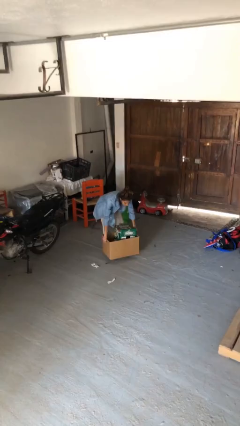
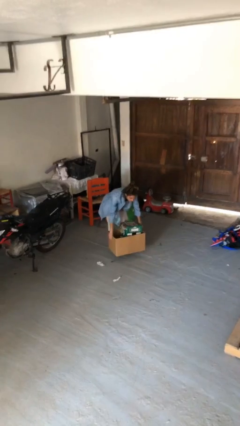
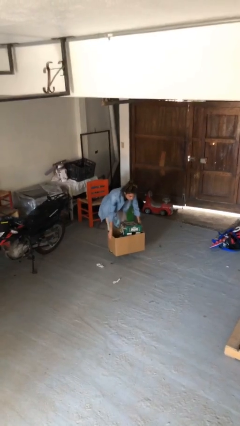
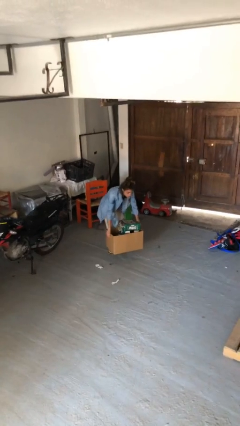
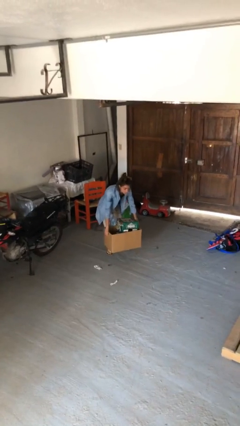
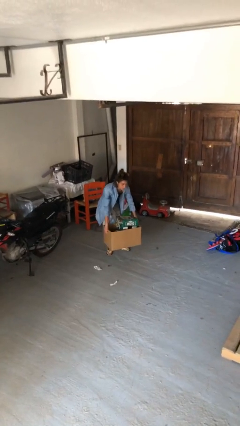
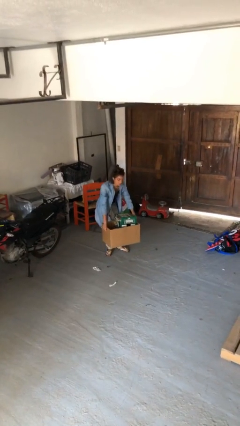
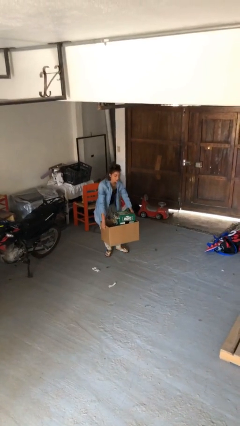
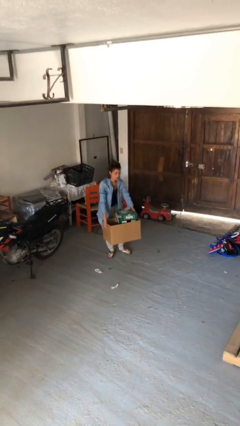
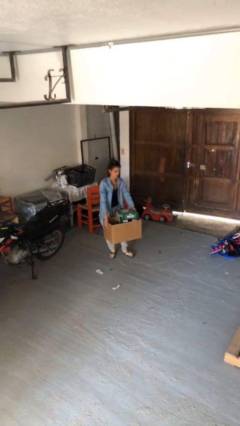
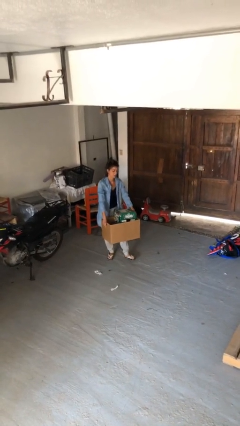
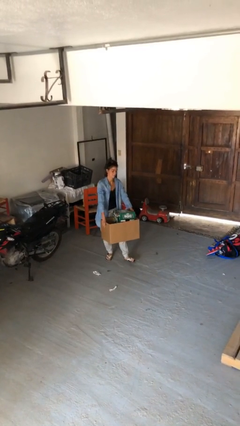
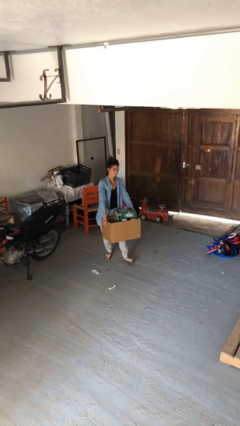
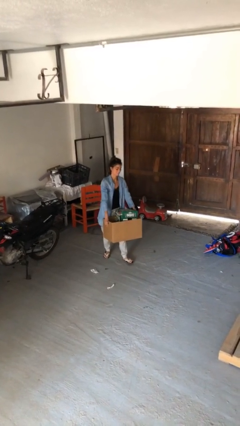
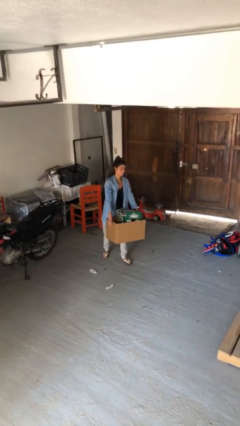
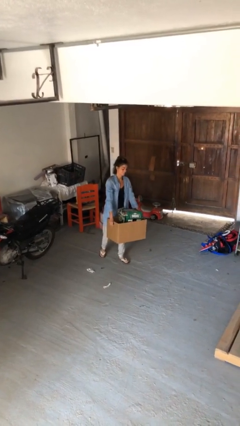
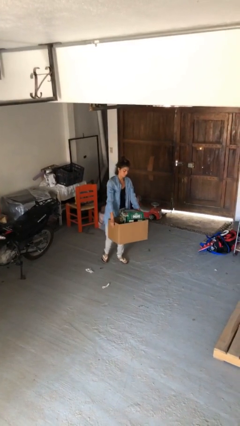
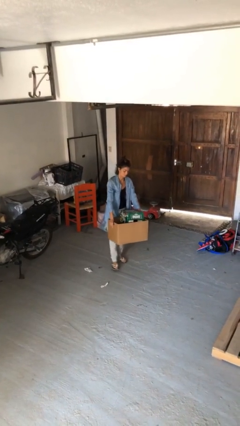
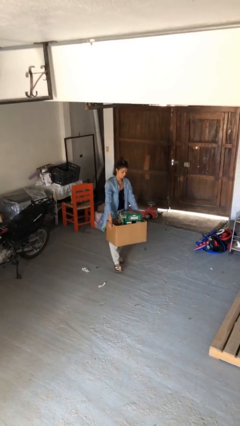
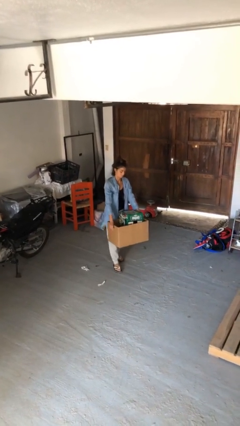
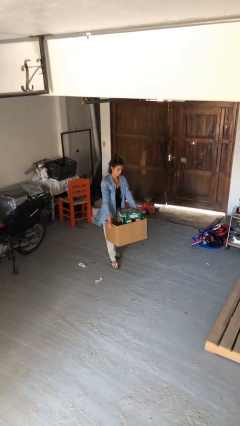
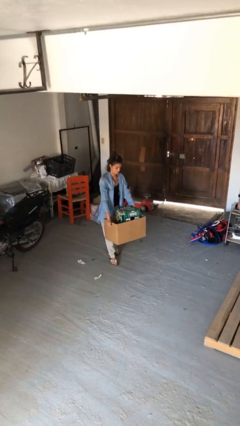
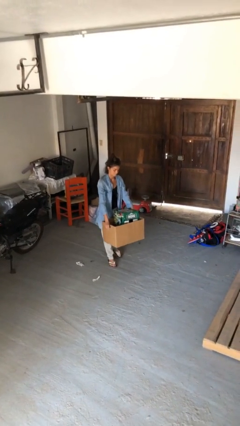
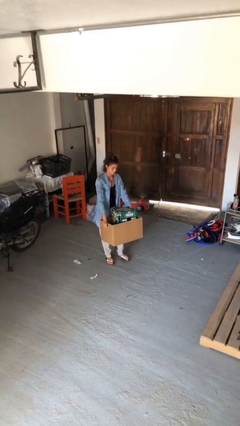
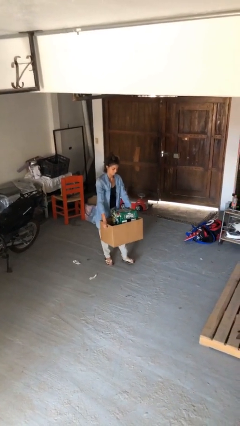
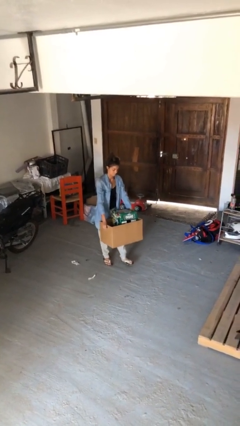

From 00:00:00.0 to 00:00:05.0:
person carries heavy object

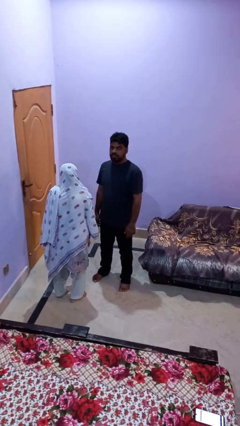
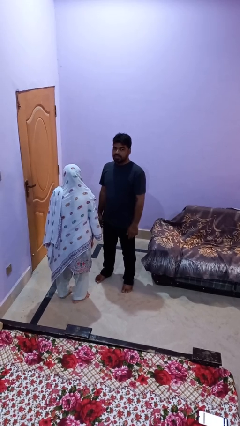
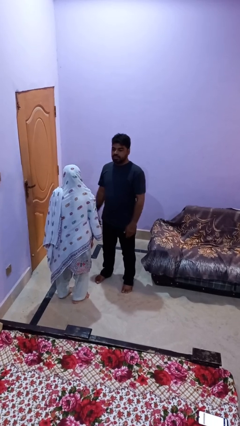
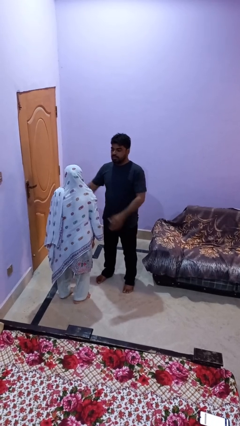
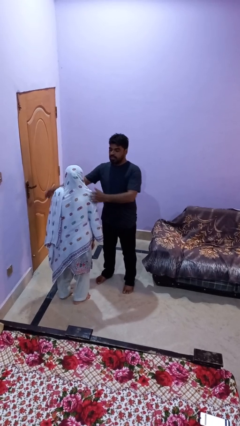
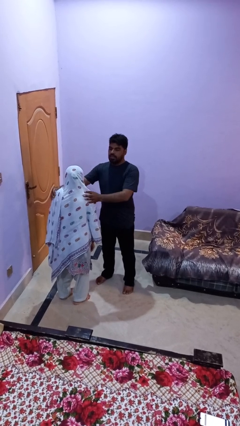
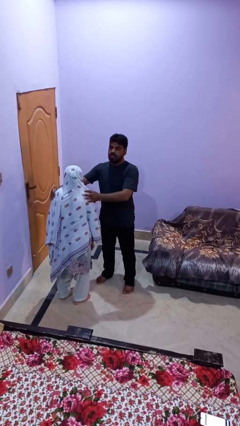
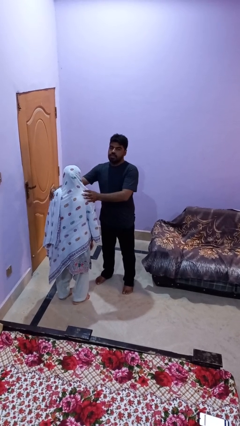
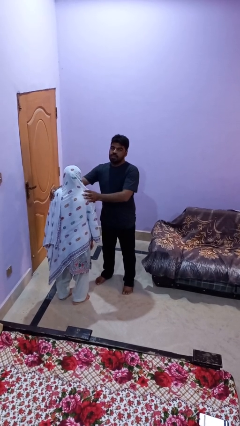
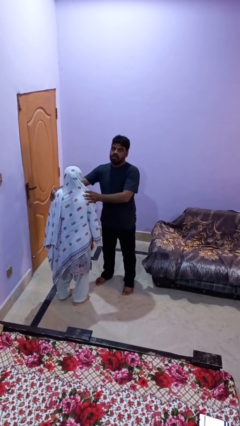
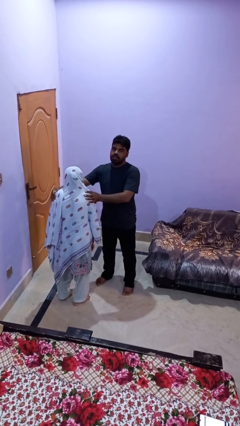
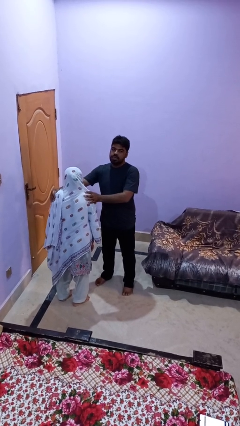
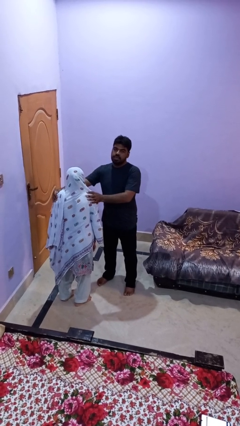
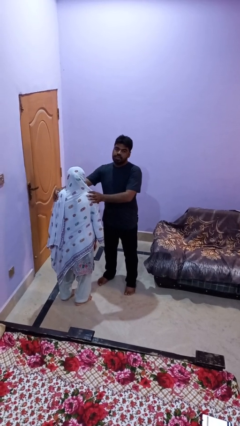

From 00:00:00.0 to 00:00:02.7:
person grabs person by shoulder

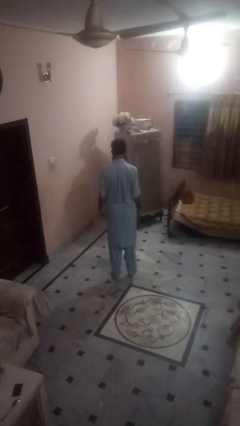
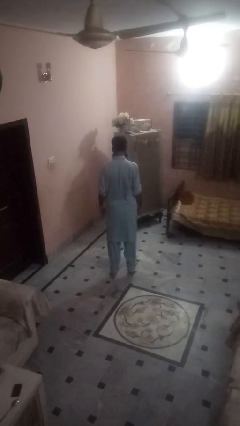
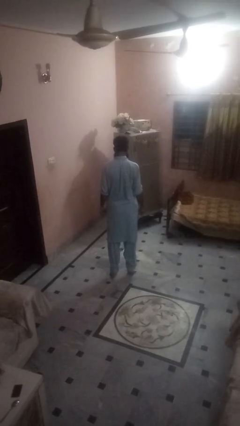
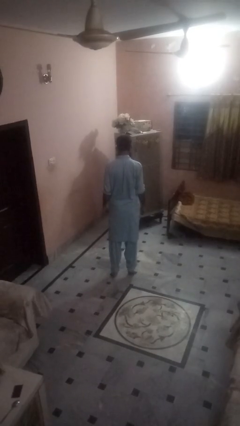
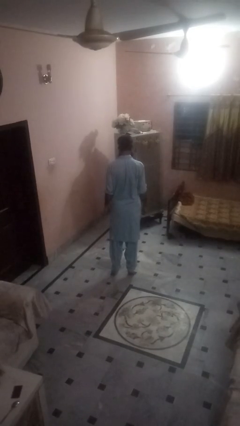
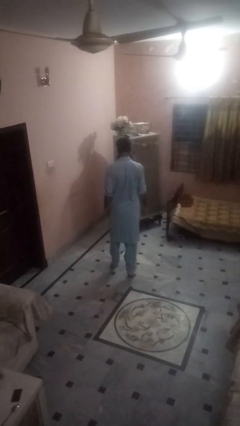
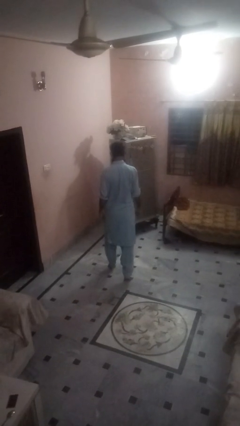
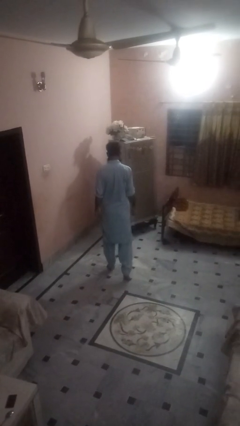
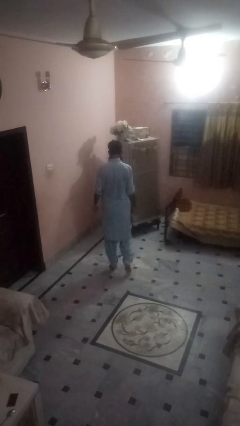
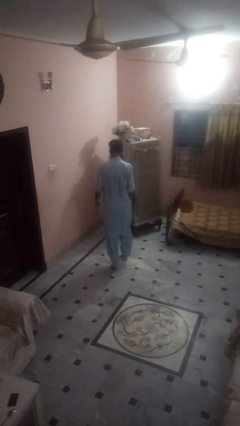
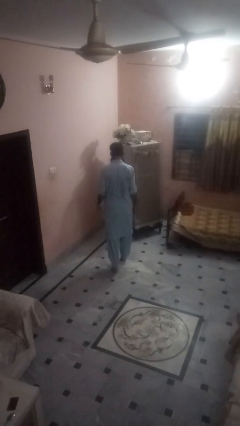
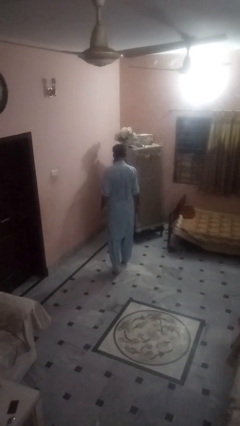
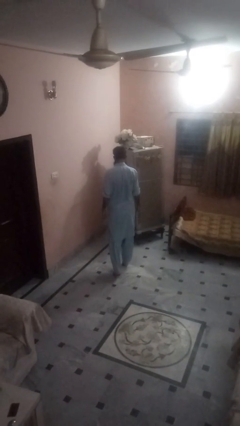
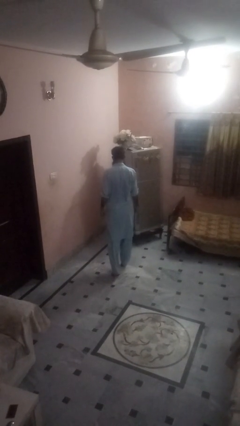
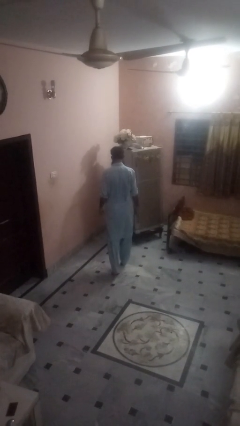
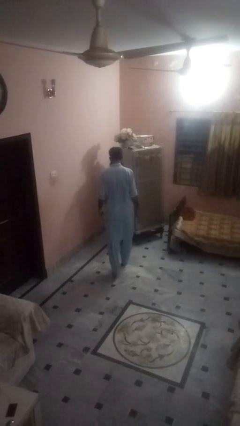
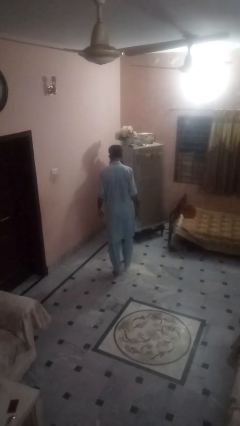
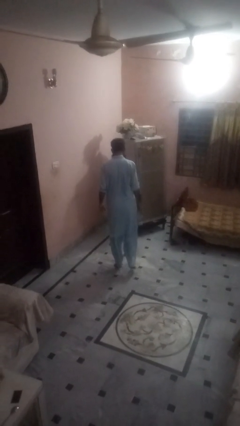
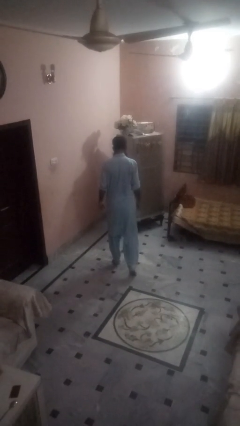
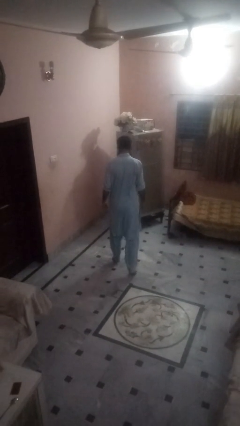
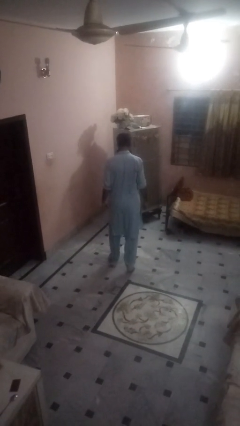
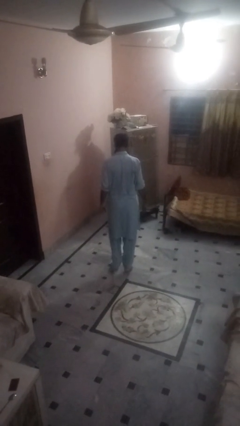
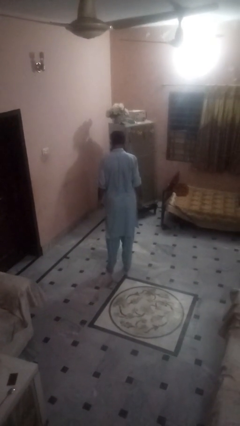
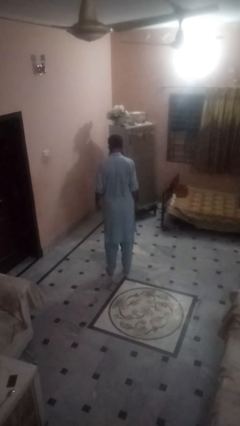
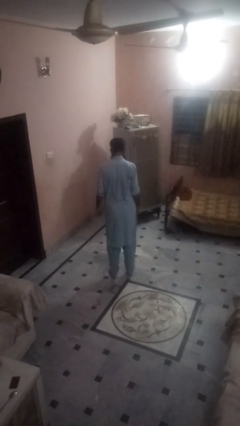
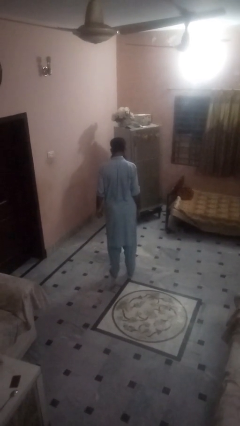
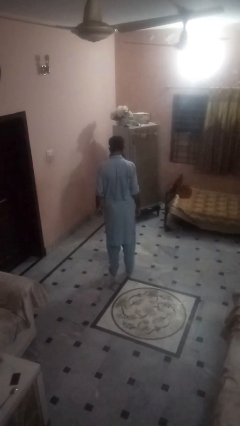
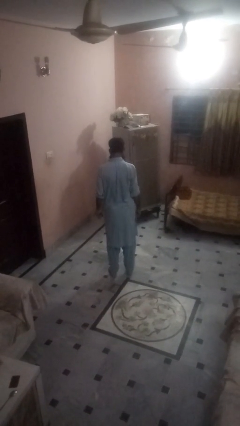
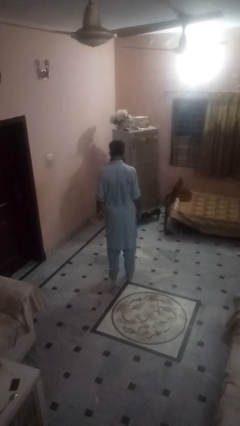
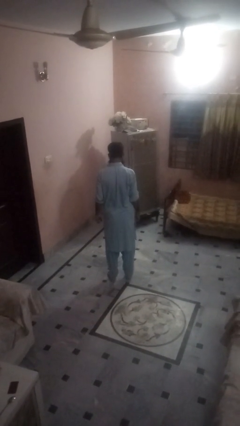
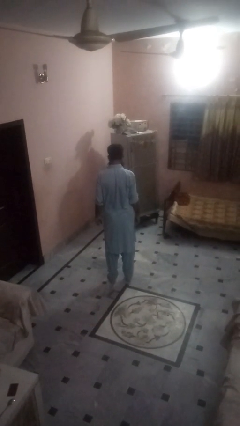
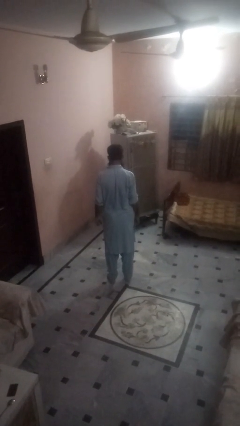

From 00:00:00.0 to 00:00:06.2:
person walks tiptoe

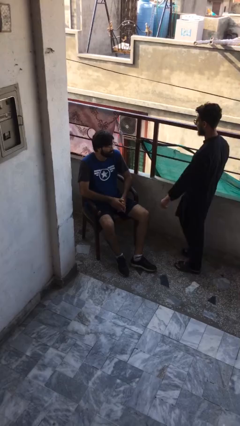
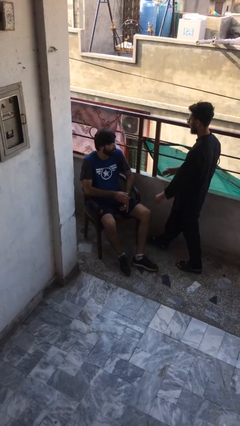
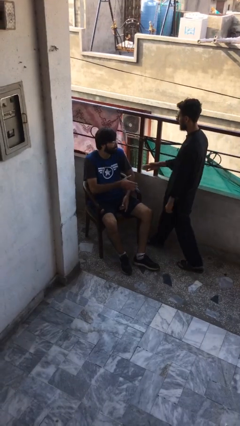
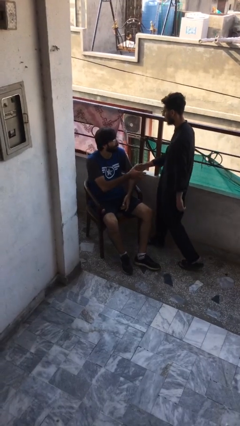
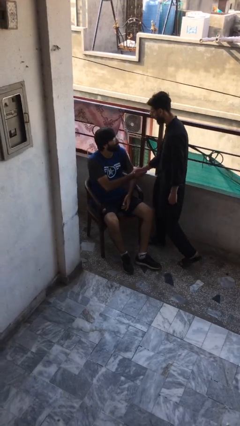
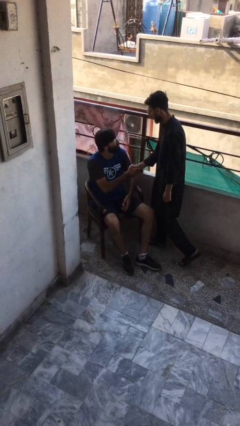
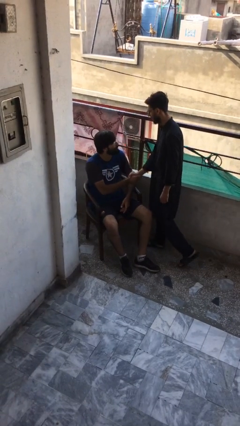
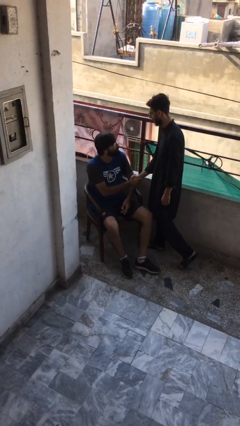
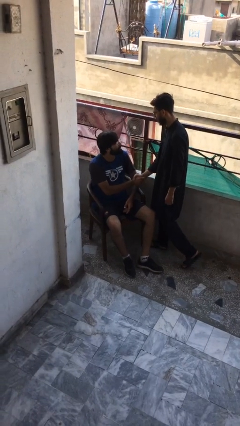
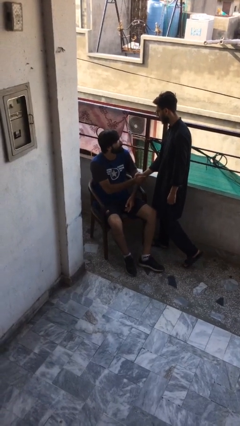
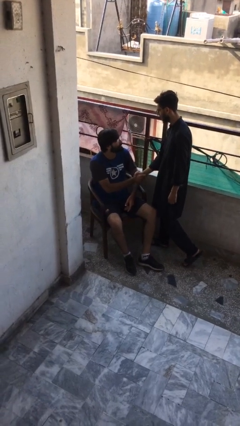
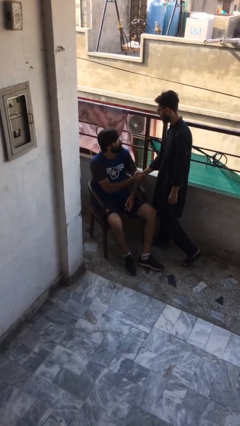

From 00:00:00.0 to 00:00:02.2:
person shakes hand

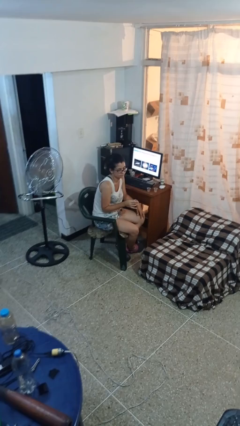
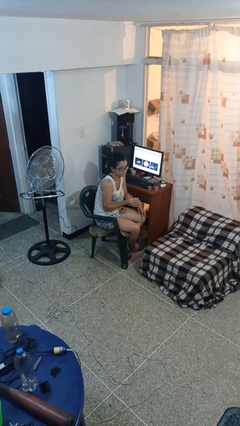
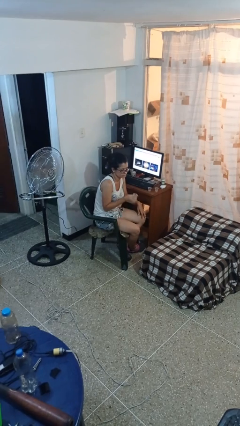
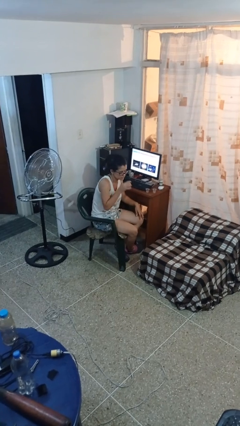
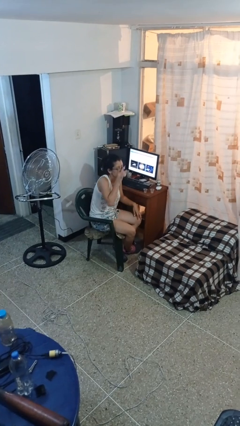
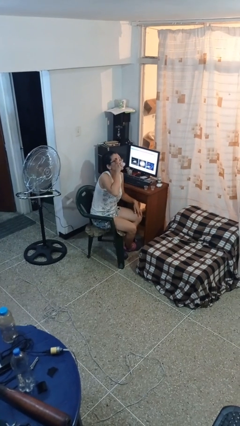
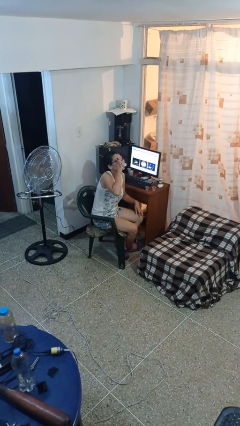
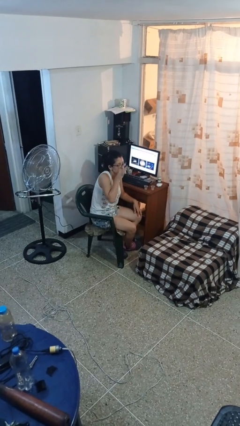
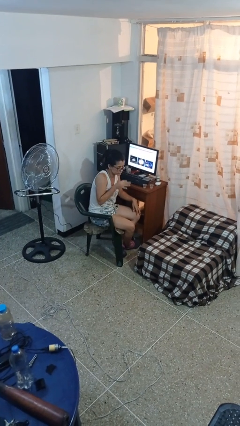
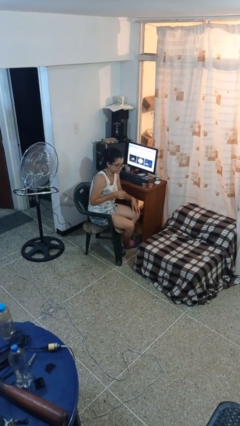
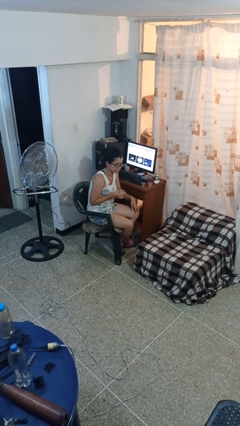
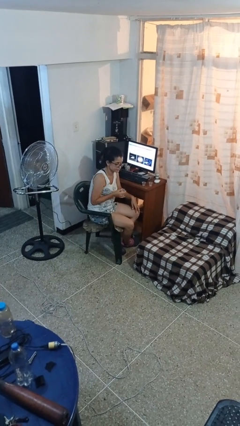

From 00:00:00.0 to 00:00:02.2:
person drinks from shotglass
